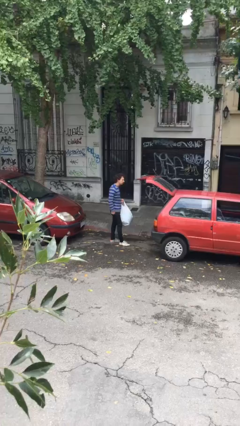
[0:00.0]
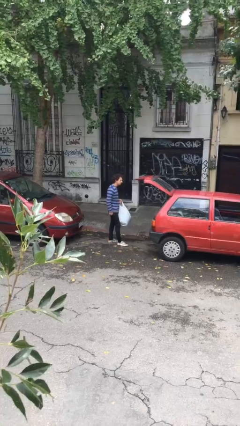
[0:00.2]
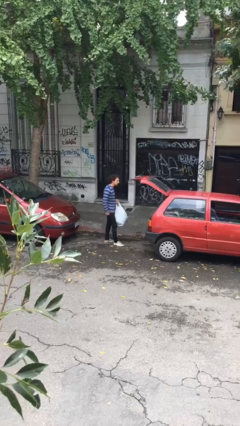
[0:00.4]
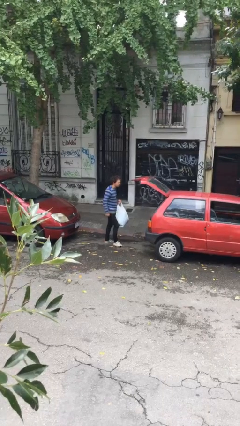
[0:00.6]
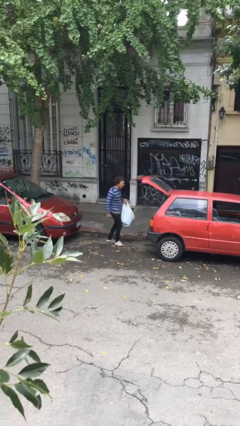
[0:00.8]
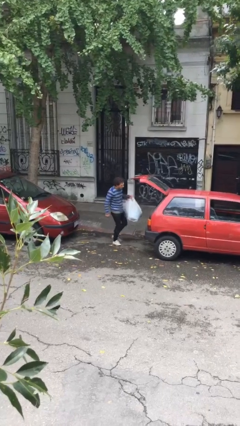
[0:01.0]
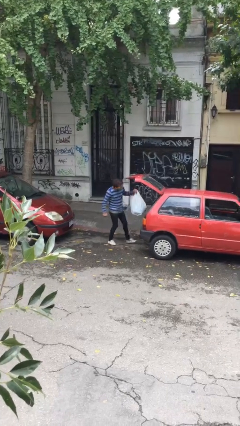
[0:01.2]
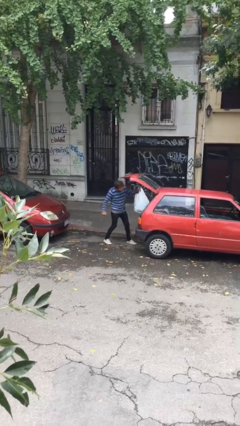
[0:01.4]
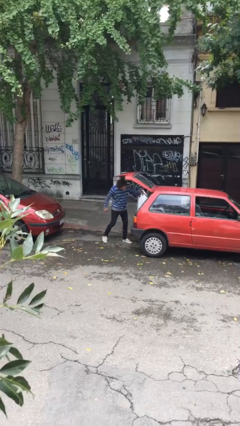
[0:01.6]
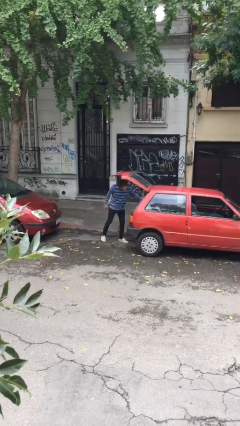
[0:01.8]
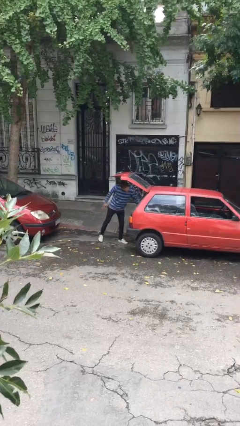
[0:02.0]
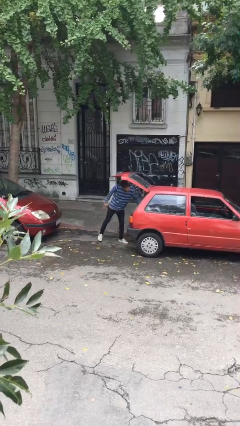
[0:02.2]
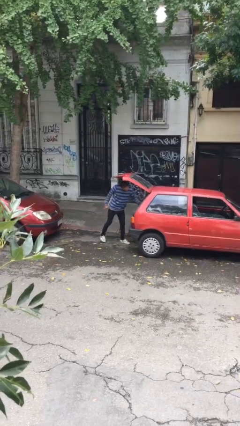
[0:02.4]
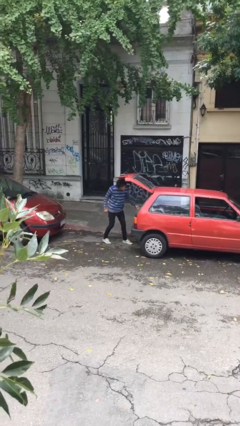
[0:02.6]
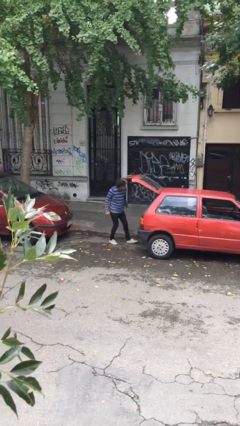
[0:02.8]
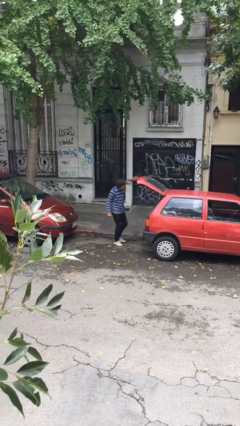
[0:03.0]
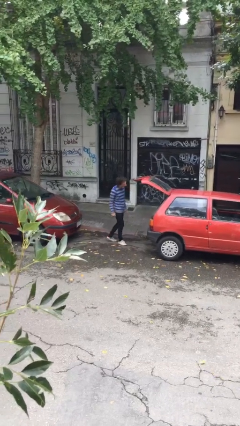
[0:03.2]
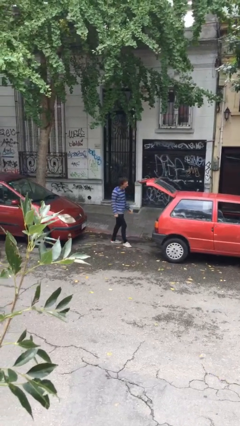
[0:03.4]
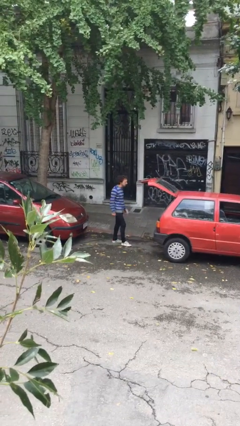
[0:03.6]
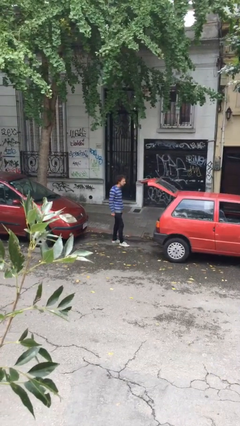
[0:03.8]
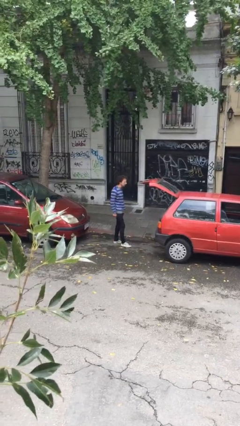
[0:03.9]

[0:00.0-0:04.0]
person loads car

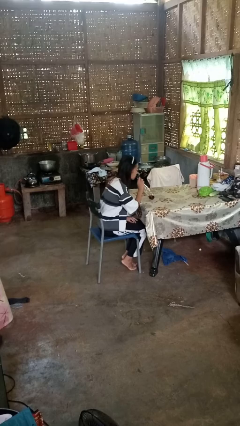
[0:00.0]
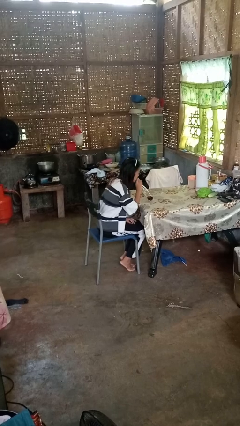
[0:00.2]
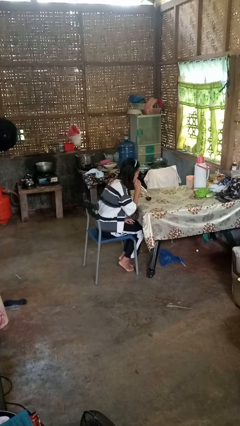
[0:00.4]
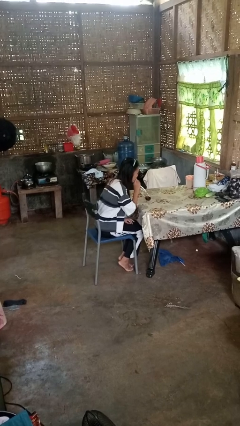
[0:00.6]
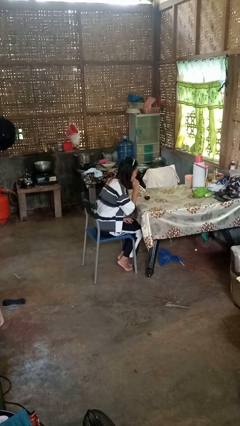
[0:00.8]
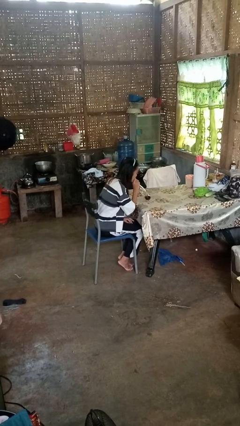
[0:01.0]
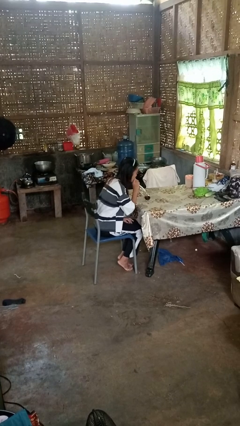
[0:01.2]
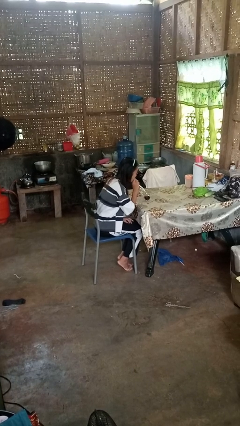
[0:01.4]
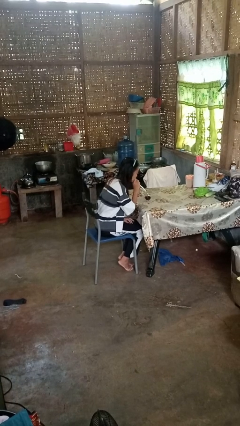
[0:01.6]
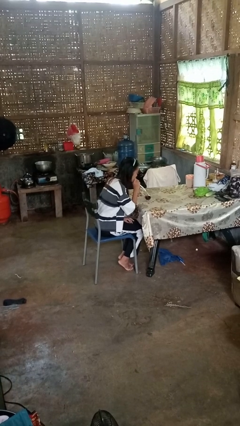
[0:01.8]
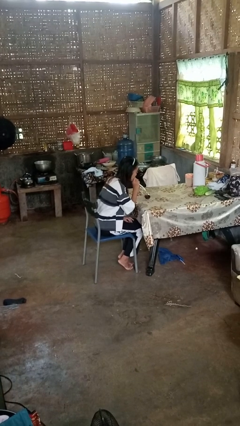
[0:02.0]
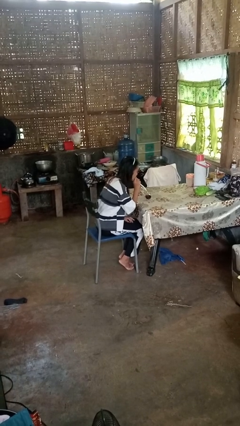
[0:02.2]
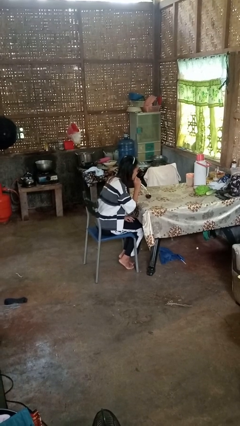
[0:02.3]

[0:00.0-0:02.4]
person drinks from straw

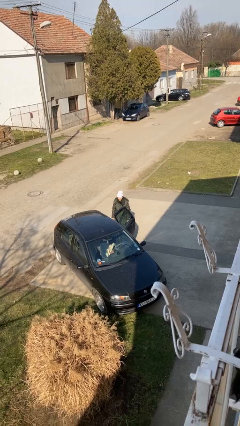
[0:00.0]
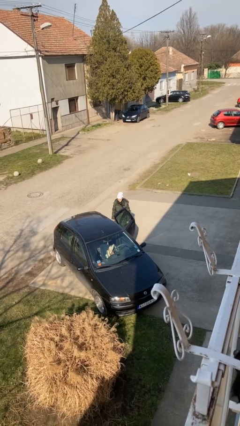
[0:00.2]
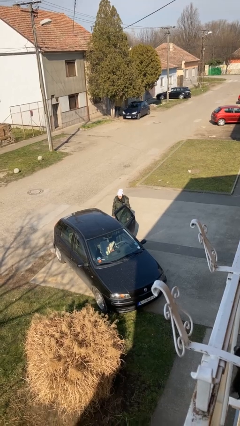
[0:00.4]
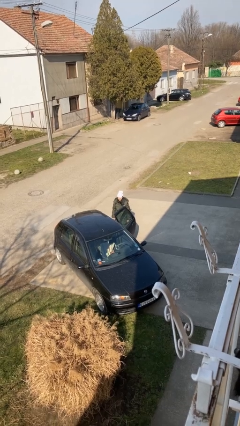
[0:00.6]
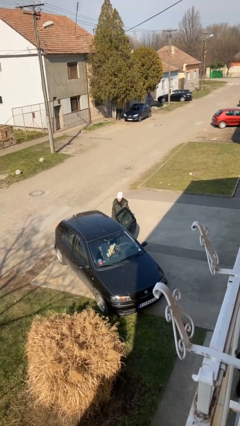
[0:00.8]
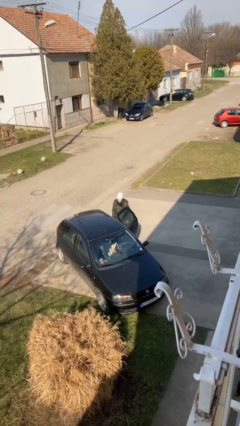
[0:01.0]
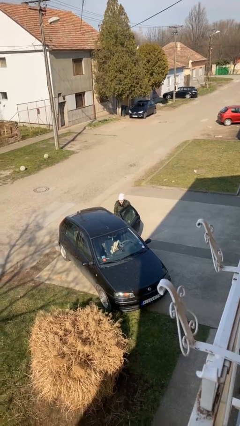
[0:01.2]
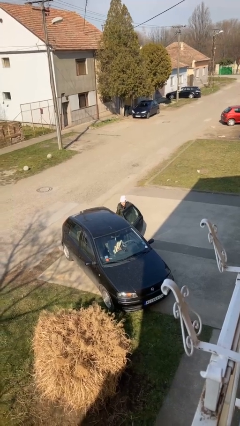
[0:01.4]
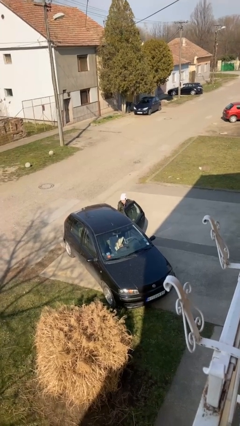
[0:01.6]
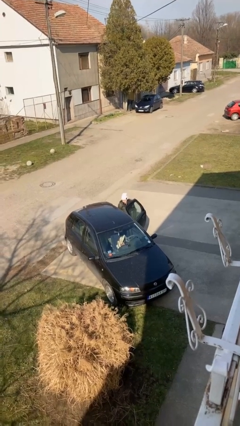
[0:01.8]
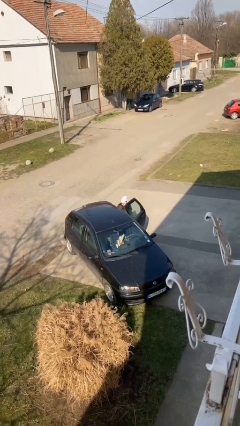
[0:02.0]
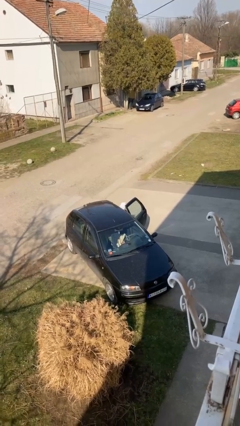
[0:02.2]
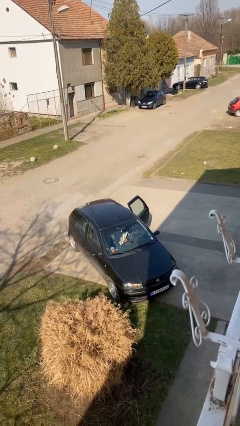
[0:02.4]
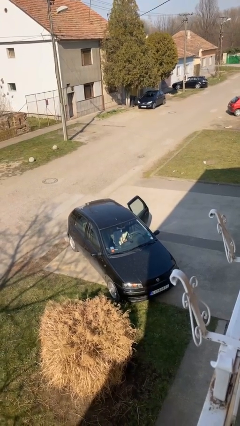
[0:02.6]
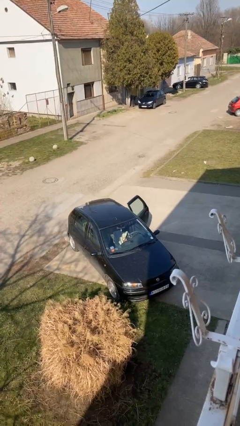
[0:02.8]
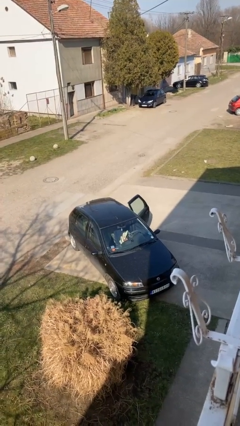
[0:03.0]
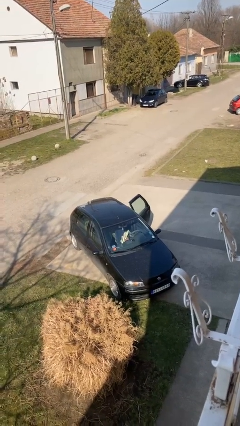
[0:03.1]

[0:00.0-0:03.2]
person enters car

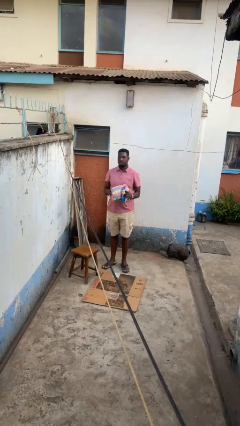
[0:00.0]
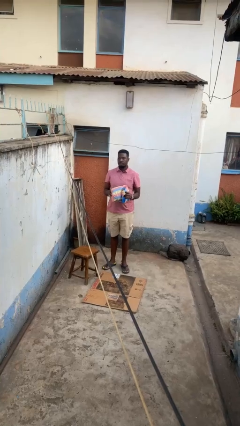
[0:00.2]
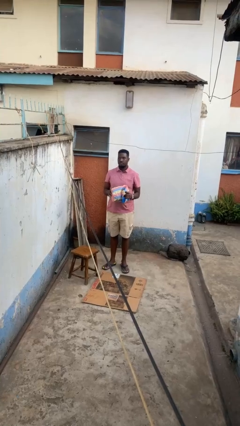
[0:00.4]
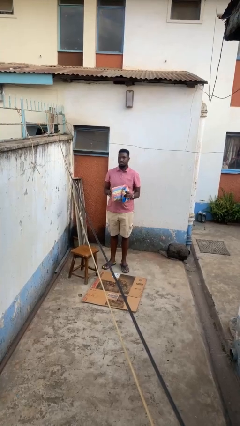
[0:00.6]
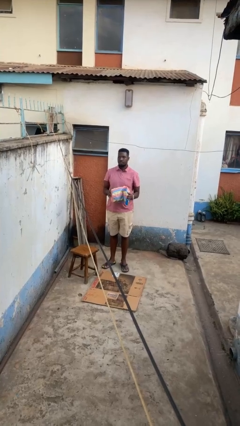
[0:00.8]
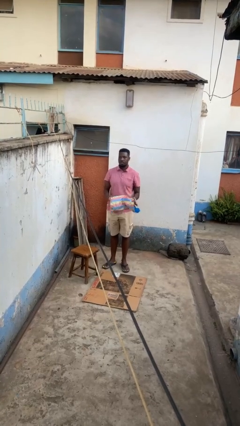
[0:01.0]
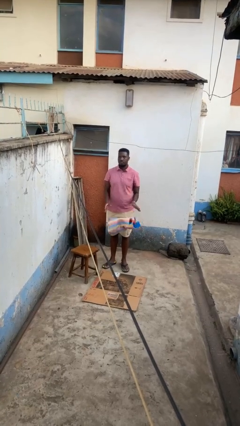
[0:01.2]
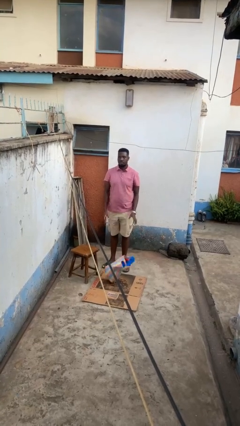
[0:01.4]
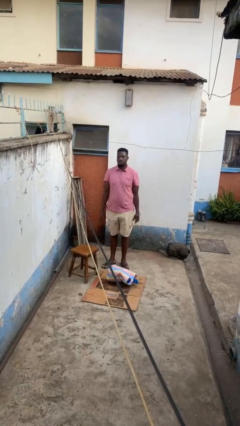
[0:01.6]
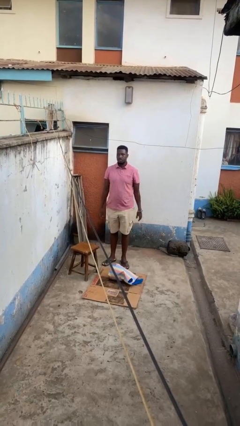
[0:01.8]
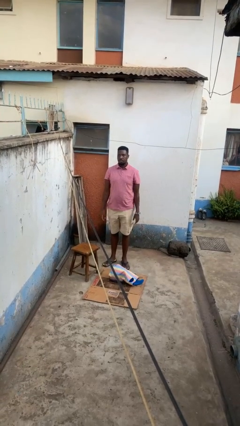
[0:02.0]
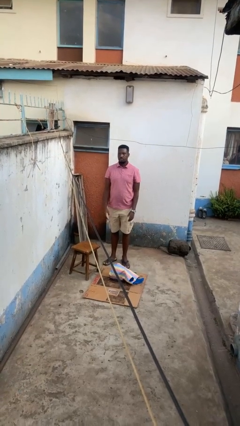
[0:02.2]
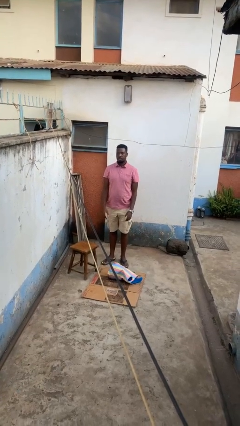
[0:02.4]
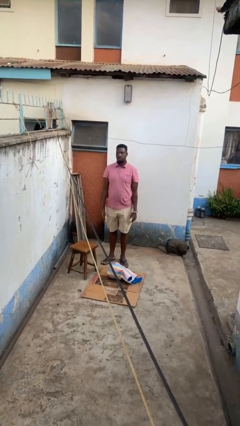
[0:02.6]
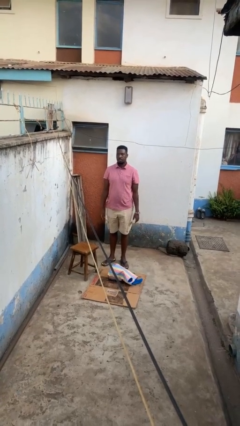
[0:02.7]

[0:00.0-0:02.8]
person drops object

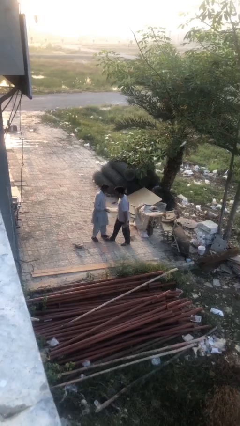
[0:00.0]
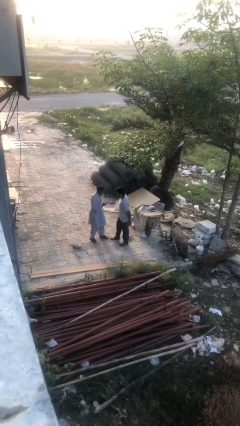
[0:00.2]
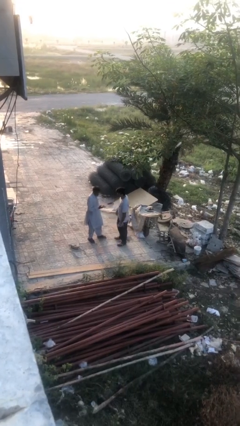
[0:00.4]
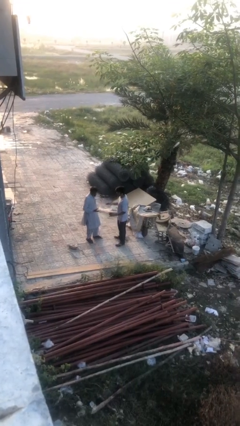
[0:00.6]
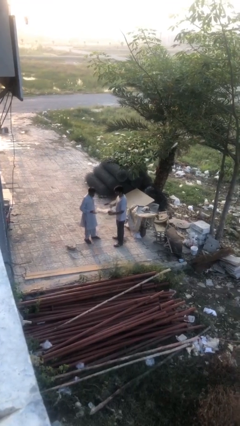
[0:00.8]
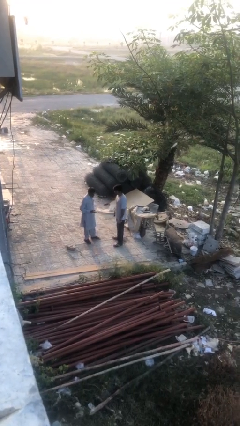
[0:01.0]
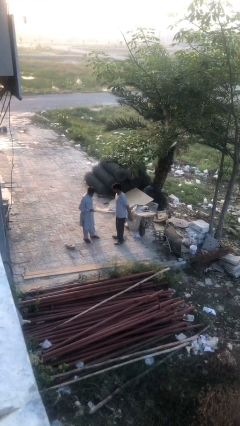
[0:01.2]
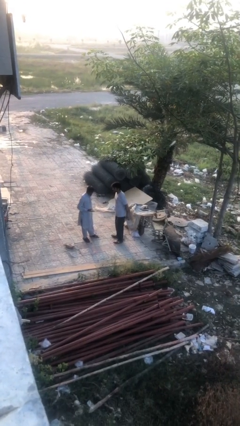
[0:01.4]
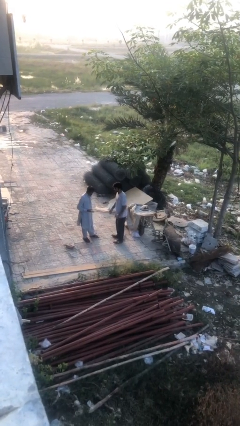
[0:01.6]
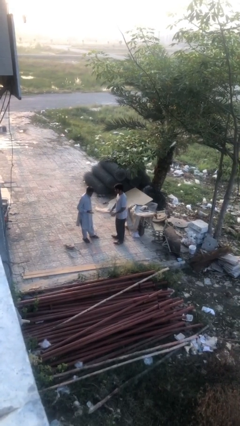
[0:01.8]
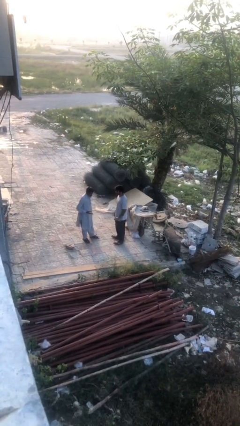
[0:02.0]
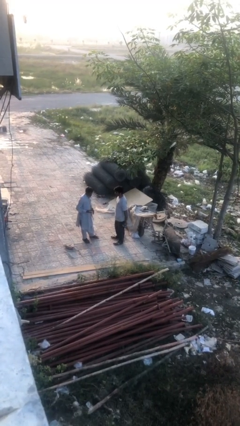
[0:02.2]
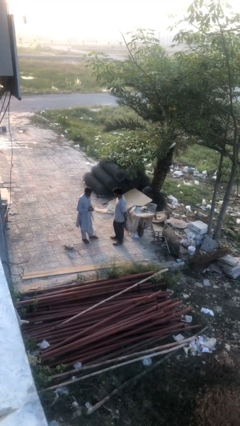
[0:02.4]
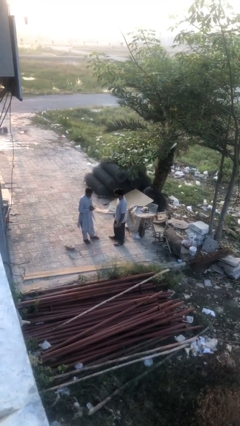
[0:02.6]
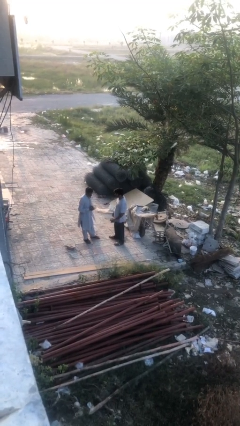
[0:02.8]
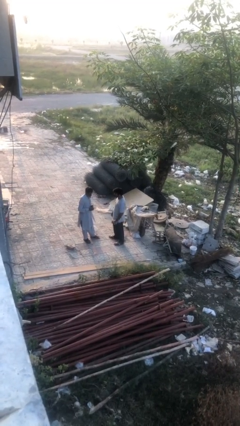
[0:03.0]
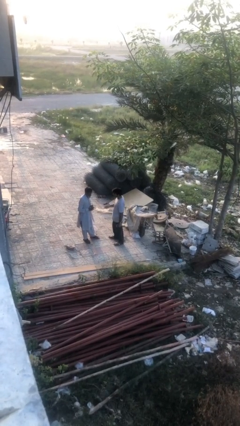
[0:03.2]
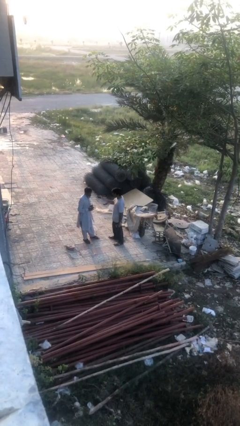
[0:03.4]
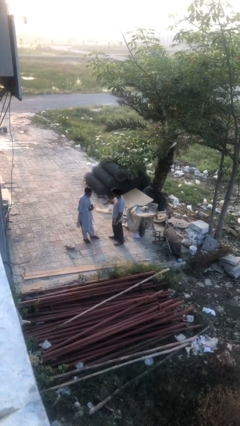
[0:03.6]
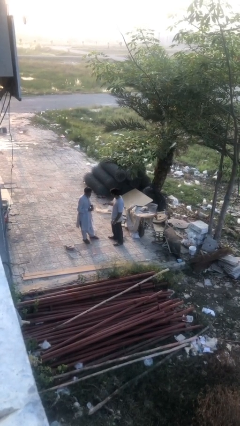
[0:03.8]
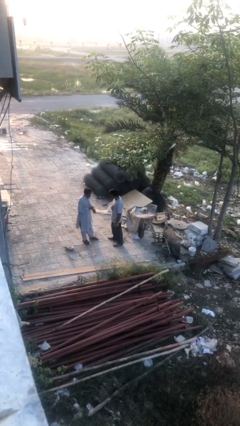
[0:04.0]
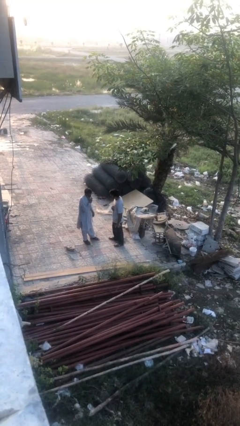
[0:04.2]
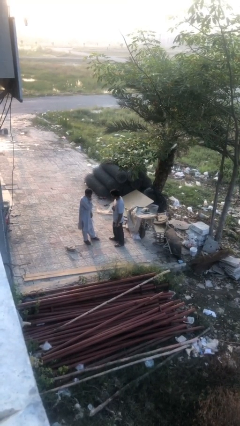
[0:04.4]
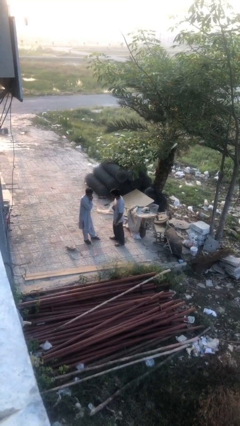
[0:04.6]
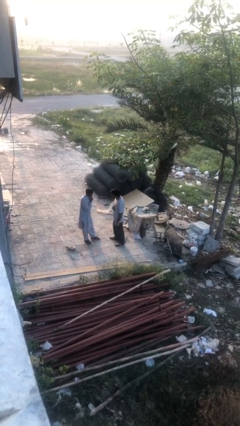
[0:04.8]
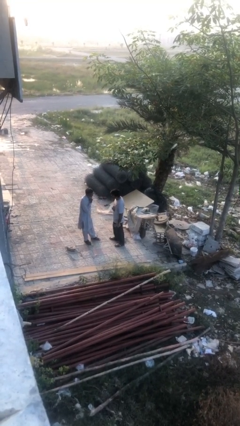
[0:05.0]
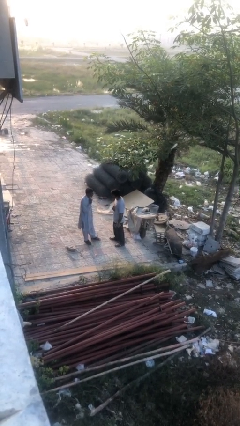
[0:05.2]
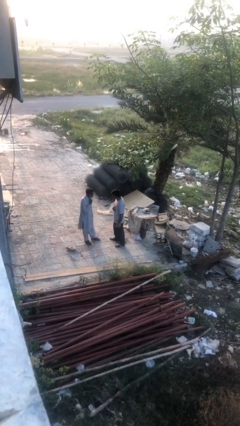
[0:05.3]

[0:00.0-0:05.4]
person talks to person
